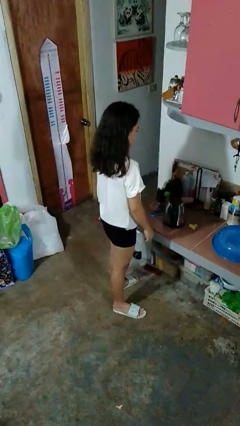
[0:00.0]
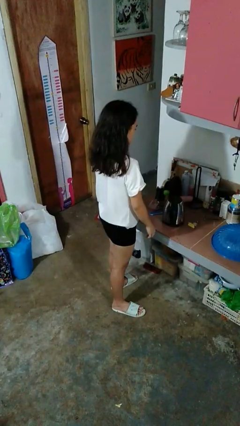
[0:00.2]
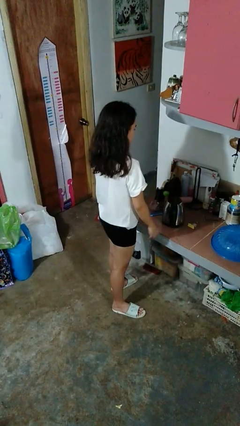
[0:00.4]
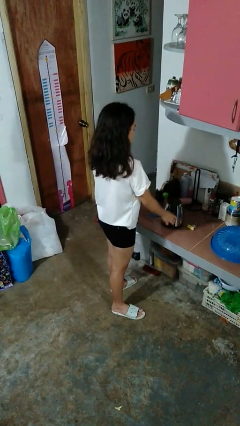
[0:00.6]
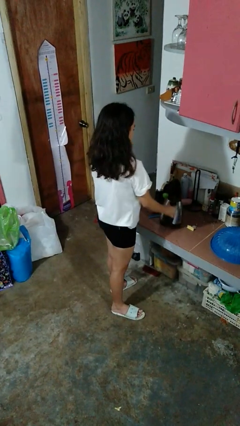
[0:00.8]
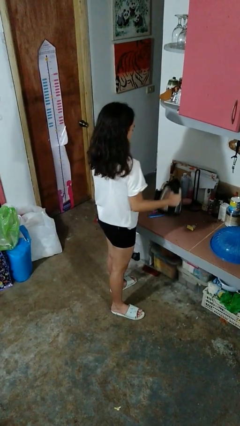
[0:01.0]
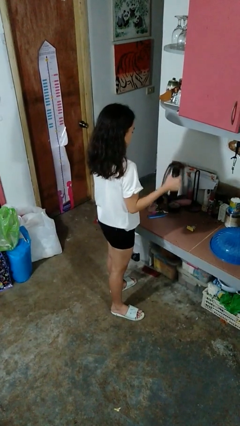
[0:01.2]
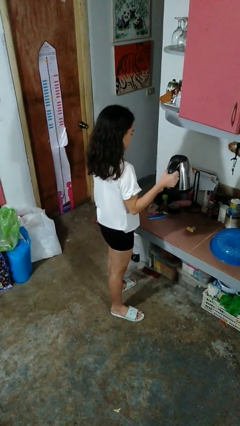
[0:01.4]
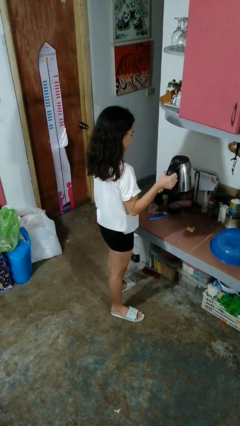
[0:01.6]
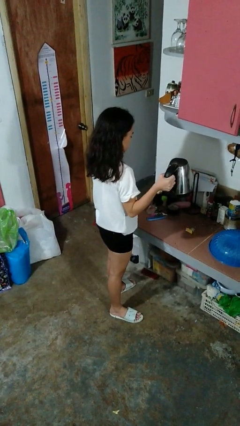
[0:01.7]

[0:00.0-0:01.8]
person picks up object from countertop

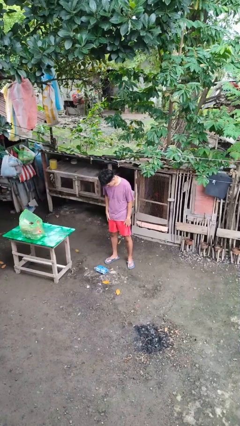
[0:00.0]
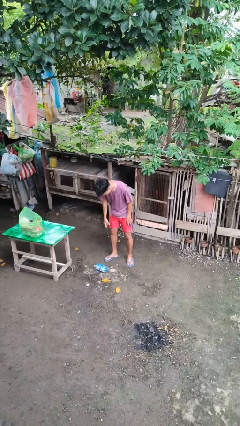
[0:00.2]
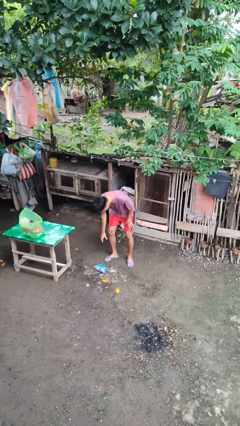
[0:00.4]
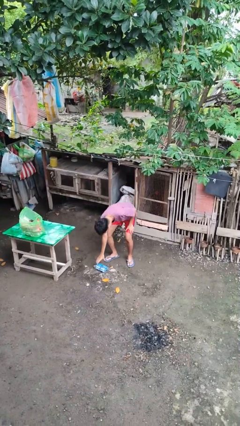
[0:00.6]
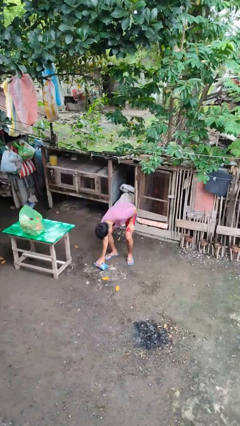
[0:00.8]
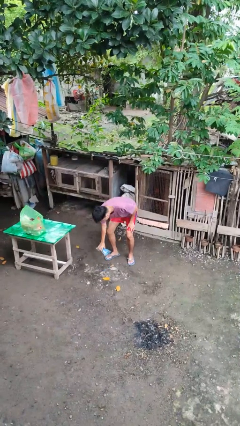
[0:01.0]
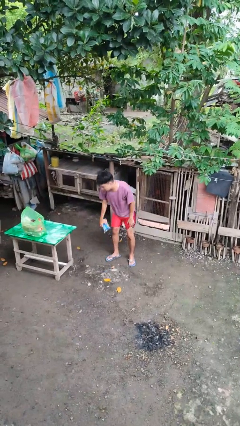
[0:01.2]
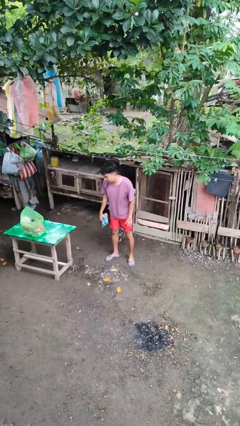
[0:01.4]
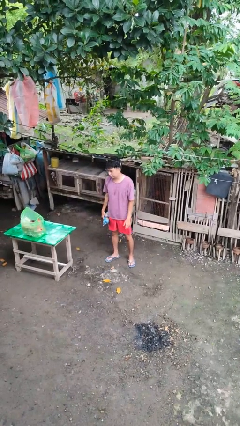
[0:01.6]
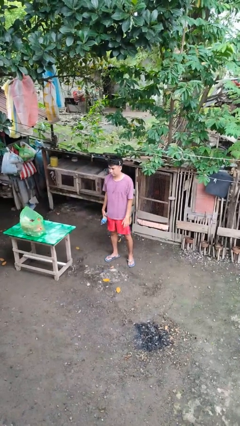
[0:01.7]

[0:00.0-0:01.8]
person picks up object from floor

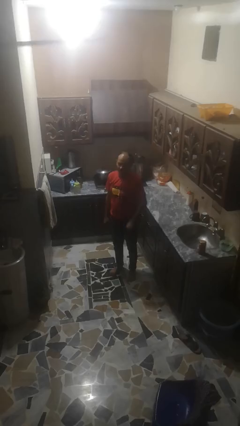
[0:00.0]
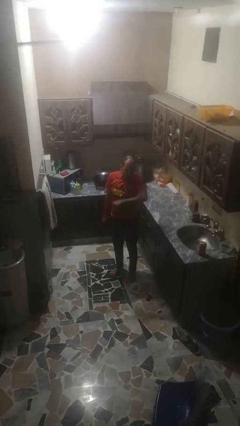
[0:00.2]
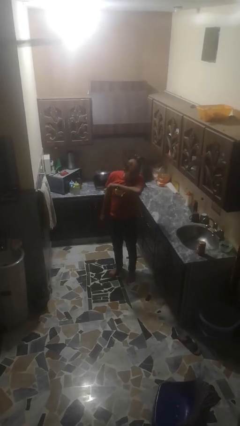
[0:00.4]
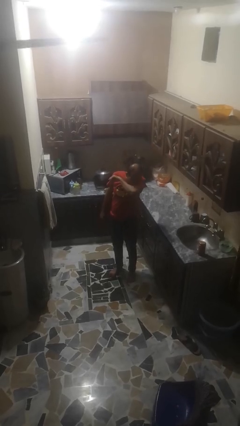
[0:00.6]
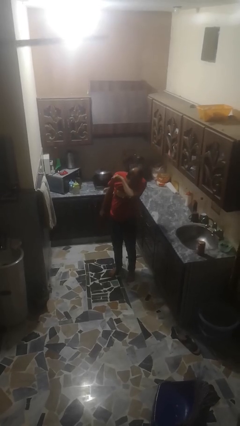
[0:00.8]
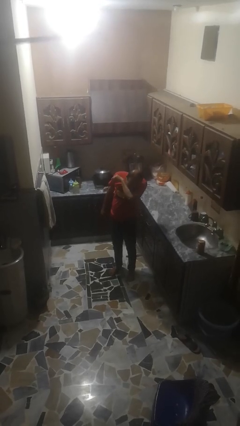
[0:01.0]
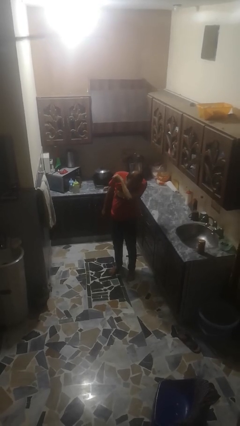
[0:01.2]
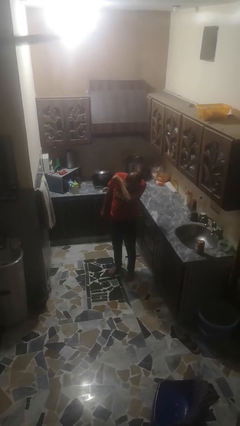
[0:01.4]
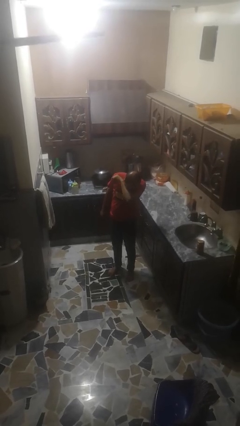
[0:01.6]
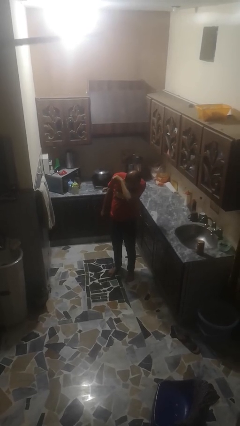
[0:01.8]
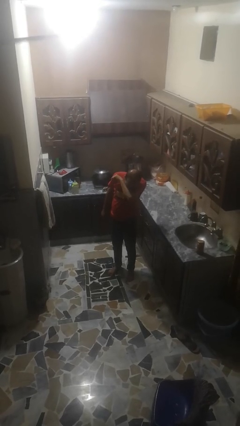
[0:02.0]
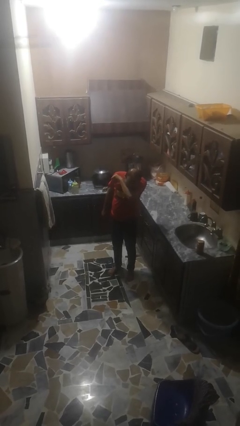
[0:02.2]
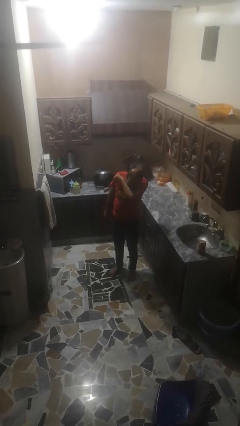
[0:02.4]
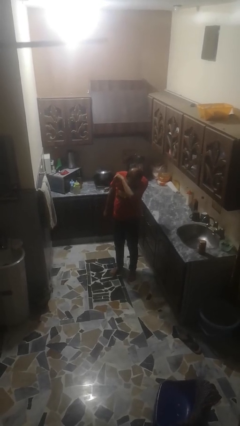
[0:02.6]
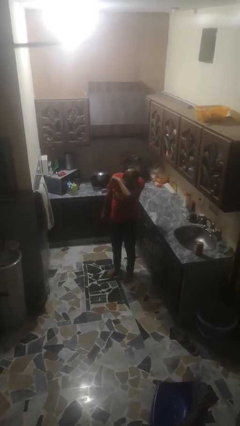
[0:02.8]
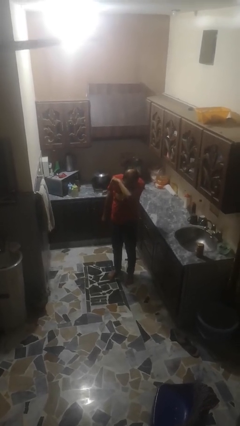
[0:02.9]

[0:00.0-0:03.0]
person sneezes into arm

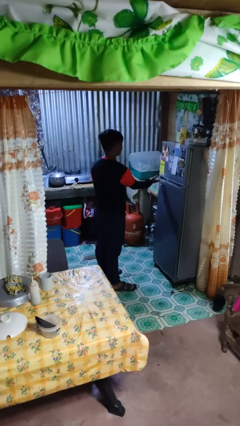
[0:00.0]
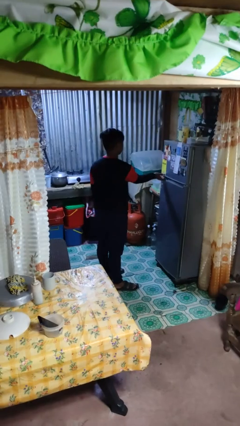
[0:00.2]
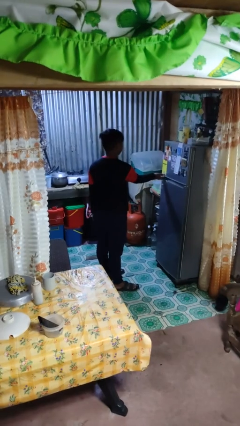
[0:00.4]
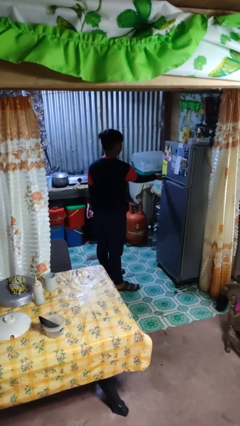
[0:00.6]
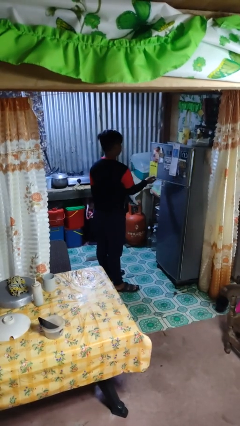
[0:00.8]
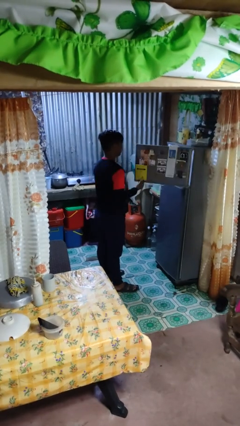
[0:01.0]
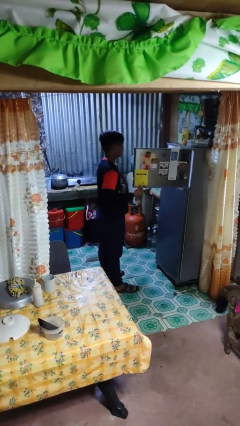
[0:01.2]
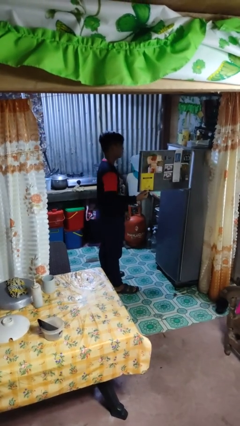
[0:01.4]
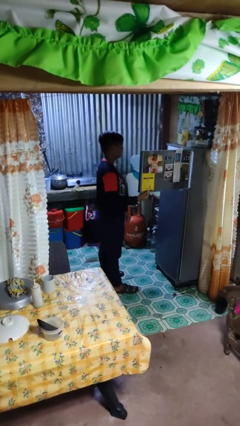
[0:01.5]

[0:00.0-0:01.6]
person opens refrigerator

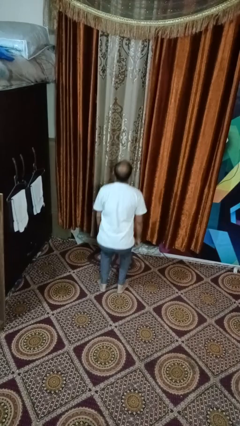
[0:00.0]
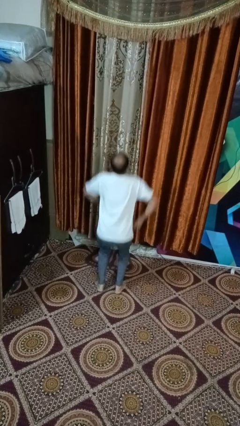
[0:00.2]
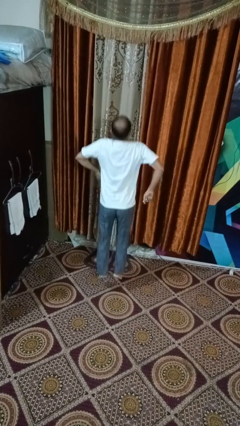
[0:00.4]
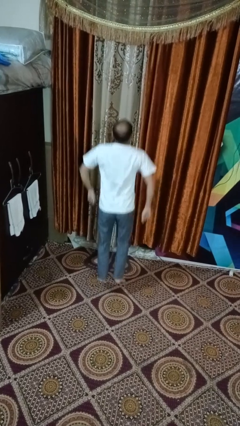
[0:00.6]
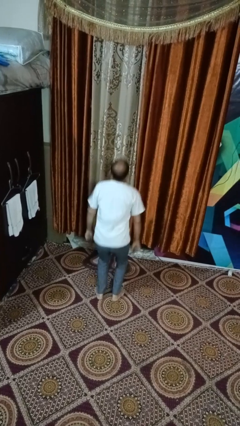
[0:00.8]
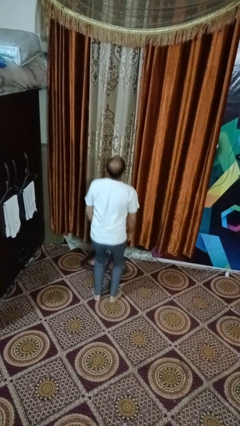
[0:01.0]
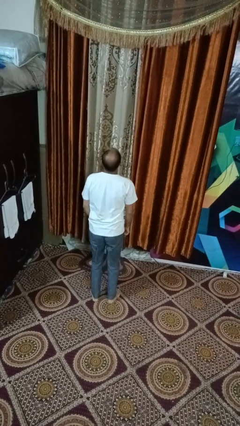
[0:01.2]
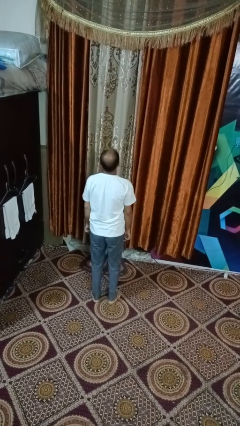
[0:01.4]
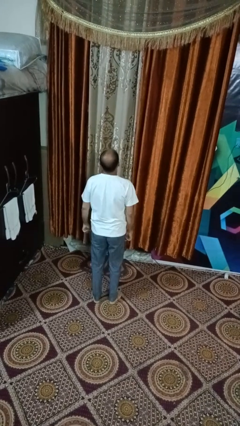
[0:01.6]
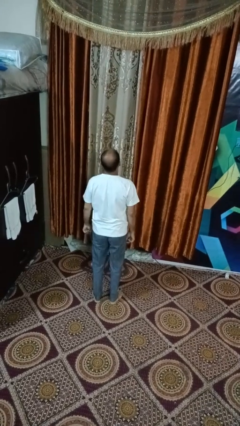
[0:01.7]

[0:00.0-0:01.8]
person jumps

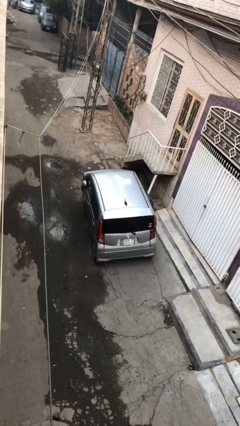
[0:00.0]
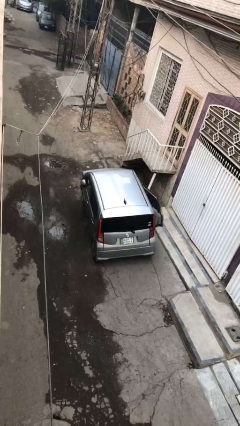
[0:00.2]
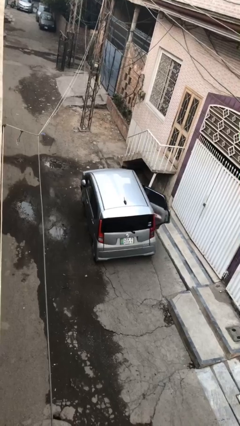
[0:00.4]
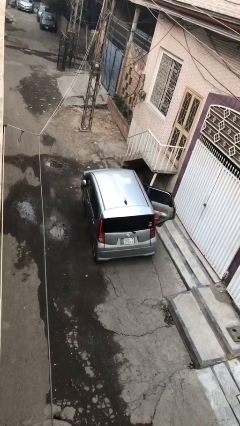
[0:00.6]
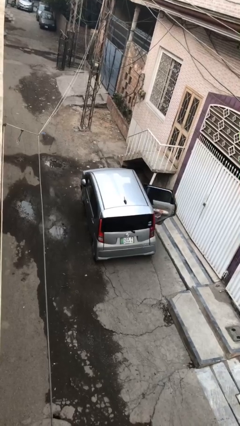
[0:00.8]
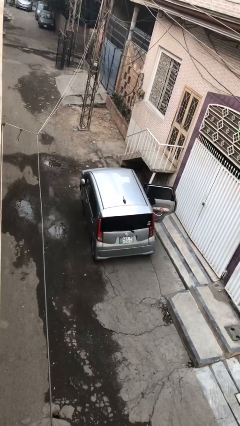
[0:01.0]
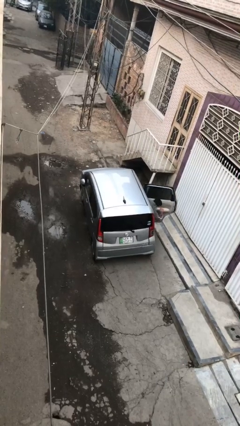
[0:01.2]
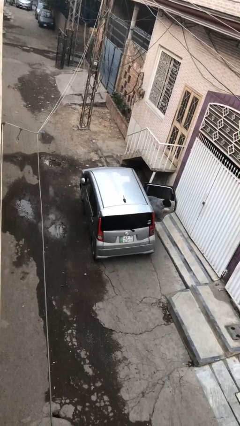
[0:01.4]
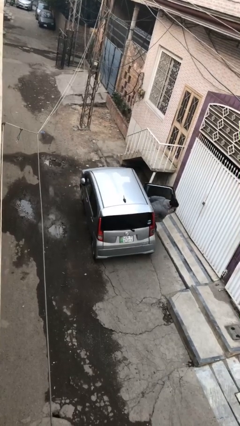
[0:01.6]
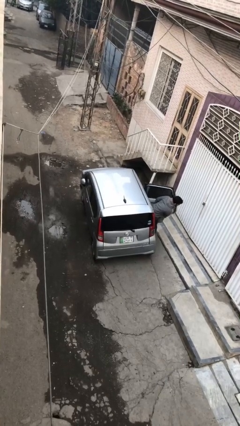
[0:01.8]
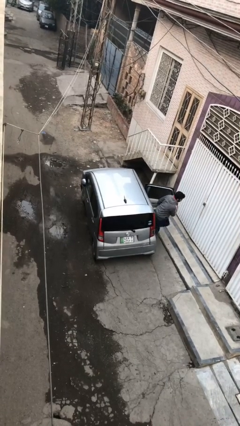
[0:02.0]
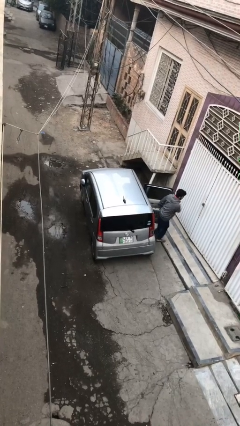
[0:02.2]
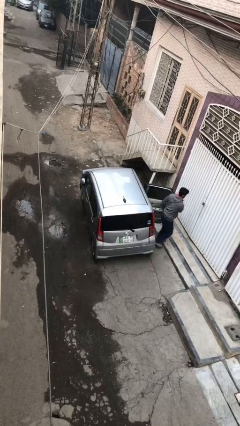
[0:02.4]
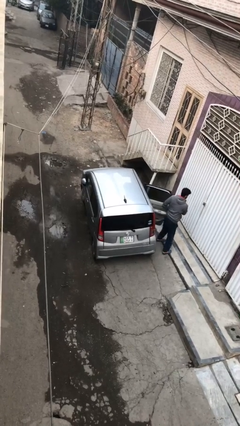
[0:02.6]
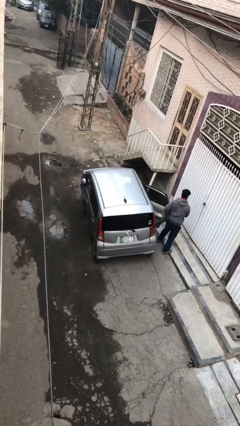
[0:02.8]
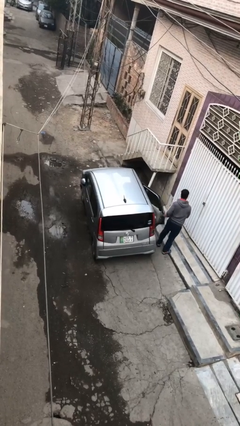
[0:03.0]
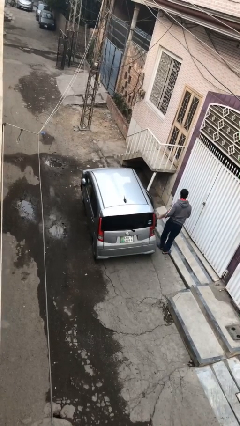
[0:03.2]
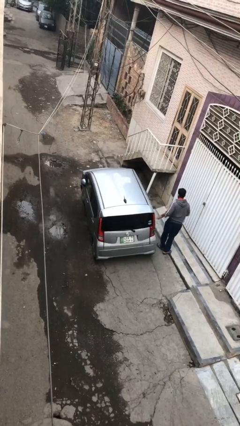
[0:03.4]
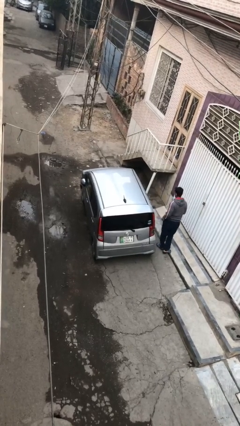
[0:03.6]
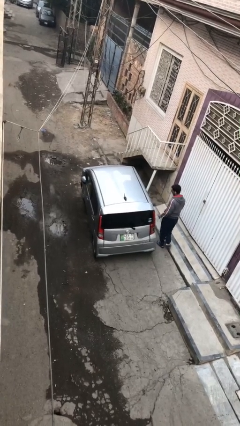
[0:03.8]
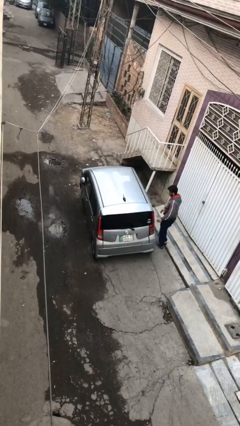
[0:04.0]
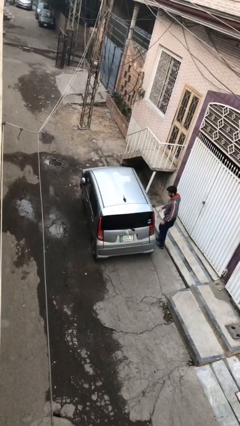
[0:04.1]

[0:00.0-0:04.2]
car drops off person

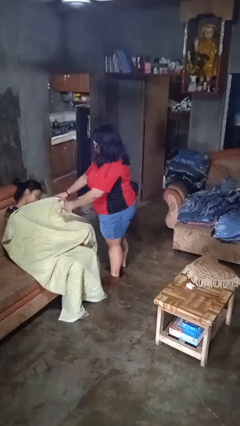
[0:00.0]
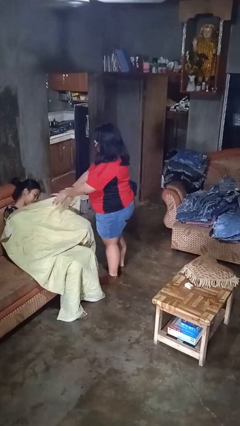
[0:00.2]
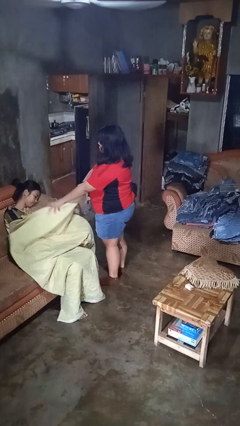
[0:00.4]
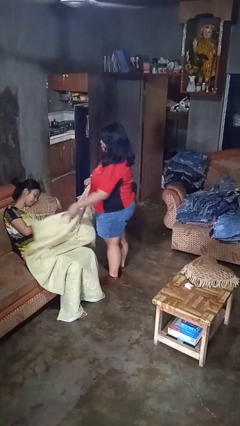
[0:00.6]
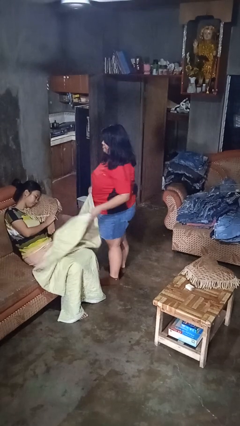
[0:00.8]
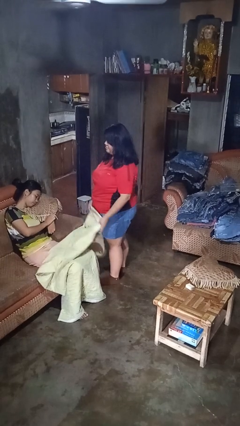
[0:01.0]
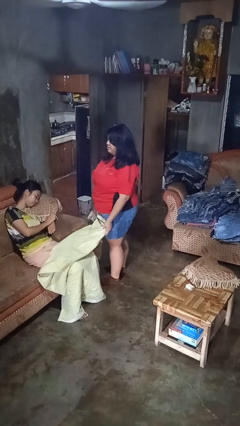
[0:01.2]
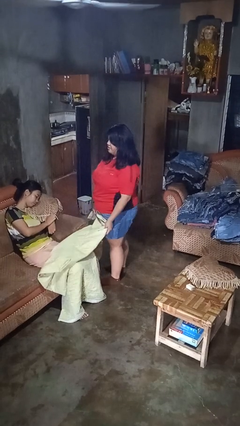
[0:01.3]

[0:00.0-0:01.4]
person uncovers friend with blanket

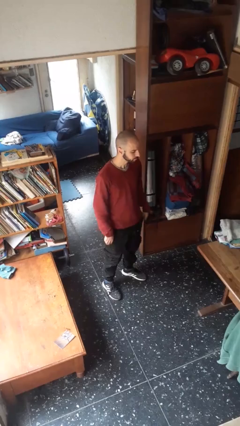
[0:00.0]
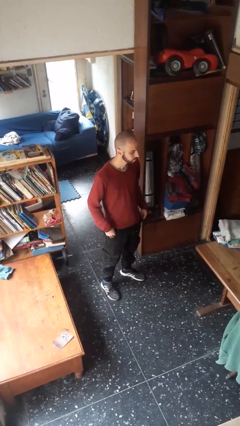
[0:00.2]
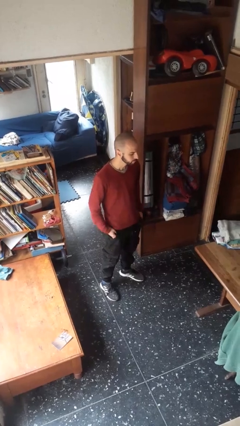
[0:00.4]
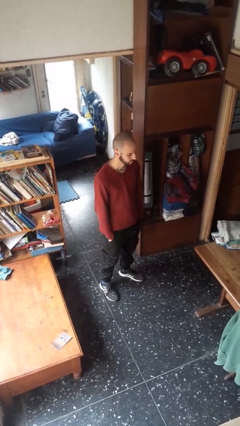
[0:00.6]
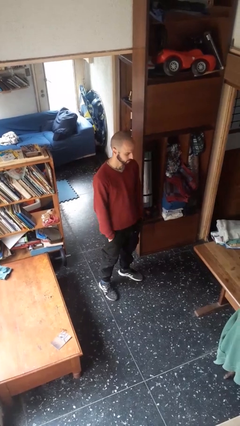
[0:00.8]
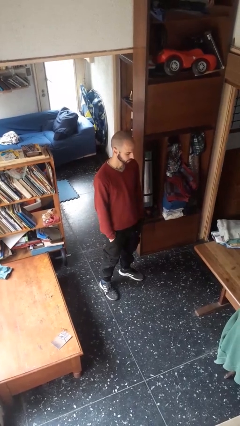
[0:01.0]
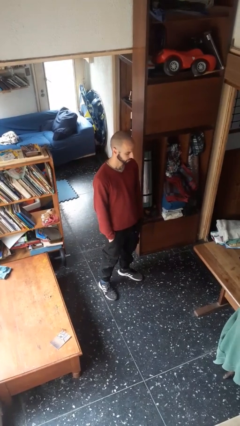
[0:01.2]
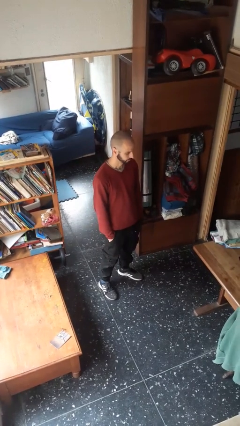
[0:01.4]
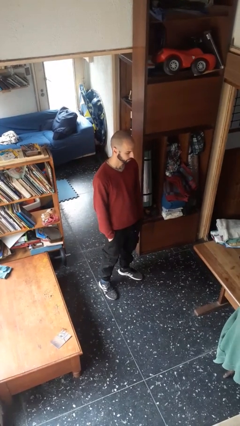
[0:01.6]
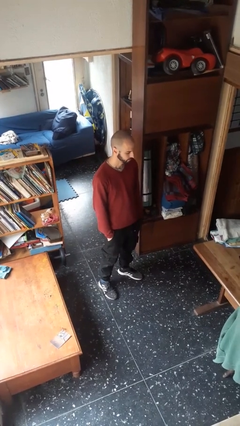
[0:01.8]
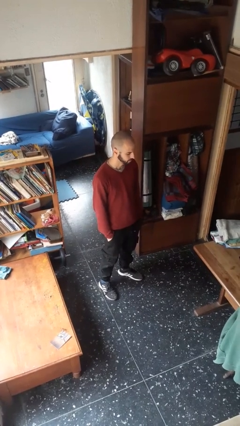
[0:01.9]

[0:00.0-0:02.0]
person puts hands in back pockets
